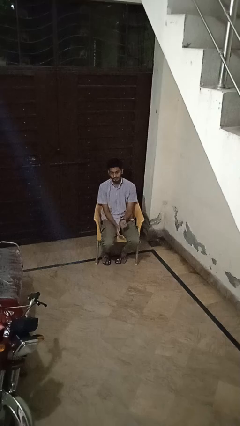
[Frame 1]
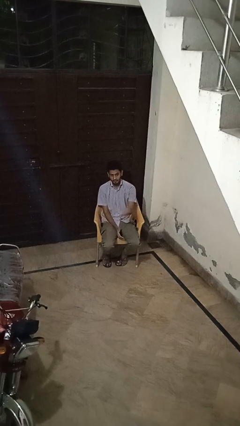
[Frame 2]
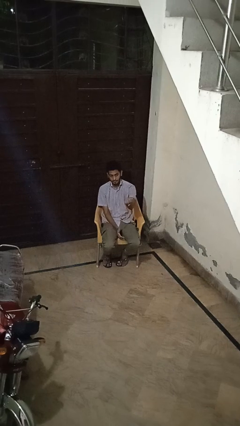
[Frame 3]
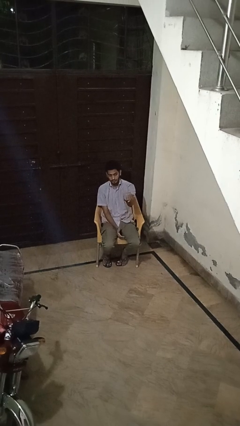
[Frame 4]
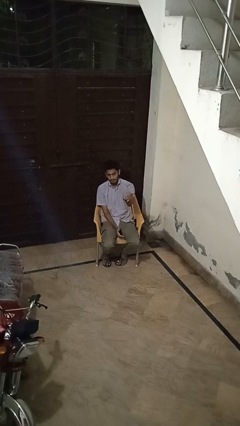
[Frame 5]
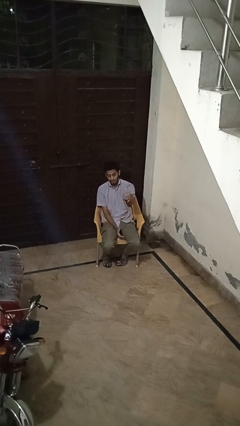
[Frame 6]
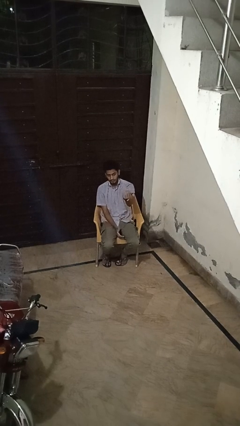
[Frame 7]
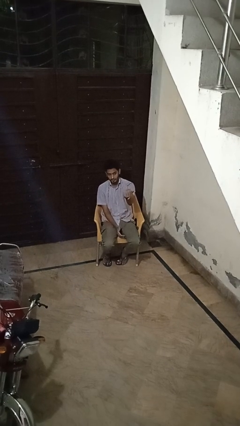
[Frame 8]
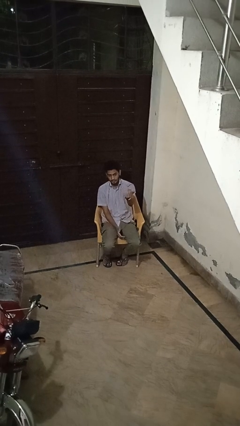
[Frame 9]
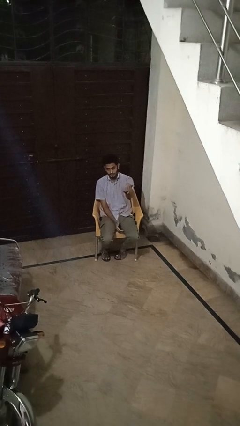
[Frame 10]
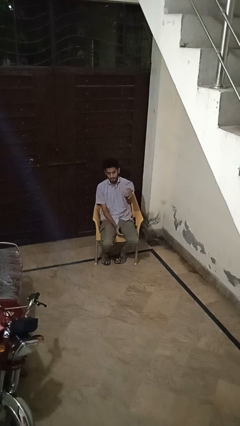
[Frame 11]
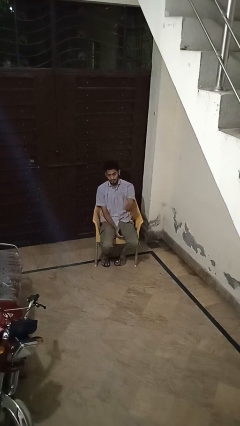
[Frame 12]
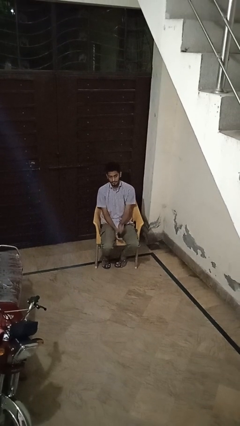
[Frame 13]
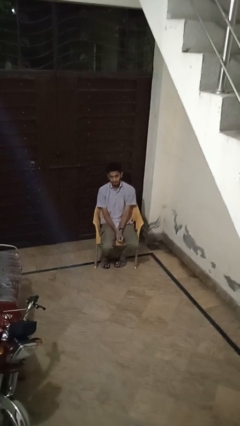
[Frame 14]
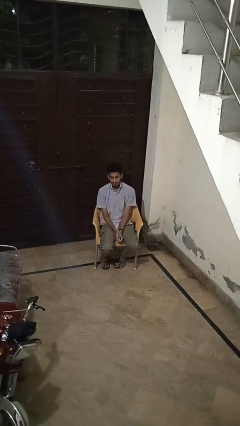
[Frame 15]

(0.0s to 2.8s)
person gestures come here

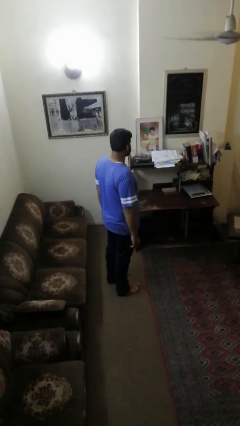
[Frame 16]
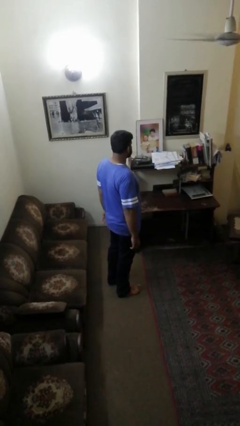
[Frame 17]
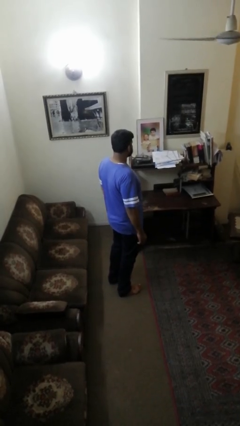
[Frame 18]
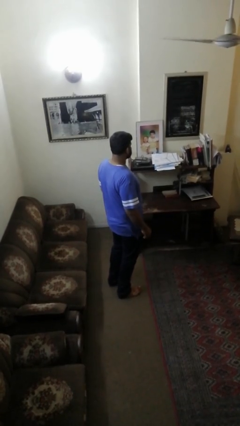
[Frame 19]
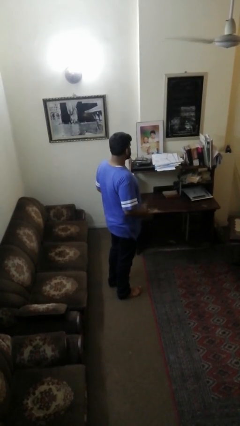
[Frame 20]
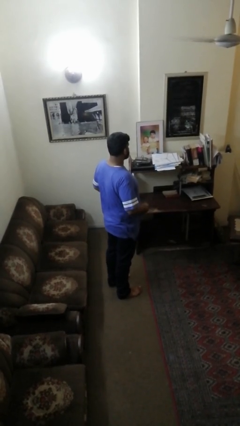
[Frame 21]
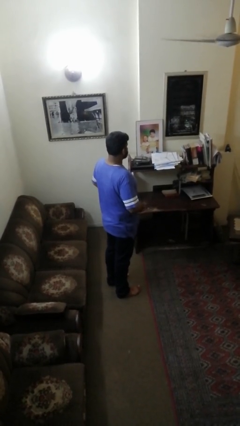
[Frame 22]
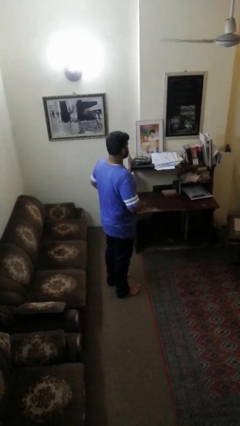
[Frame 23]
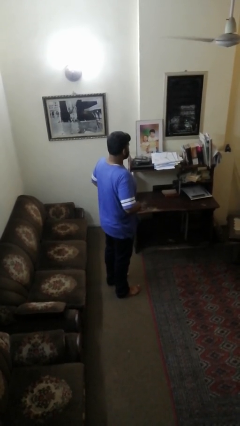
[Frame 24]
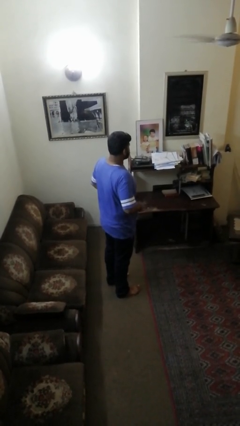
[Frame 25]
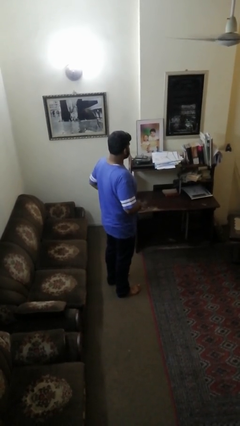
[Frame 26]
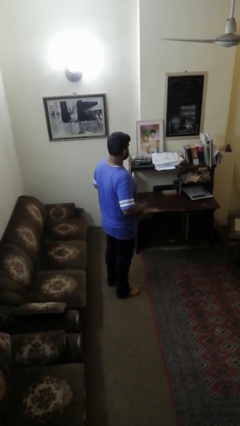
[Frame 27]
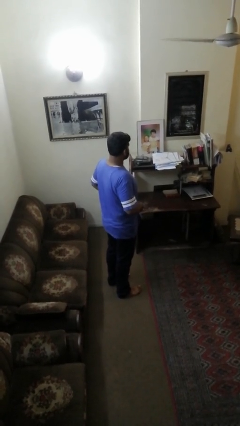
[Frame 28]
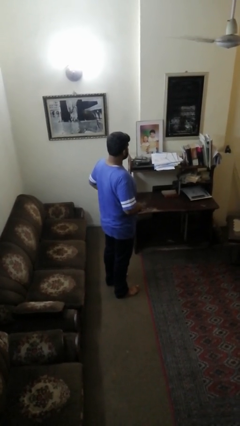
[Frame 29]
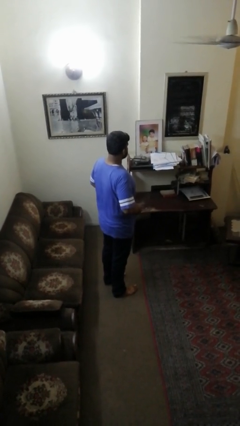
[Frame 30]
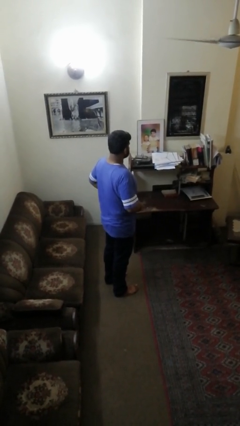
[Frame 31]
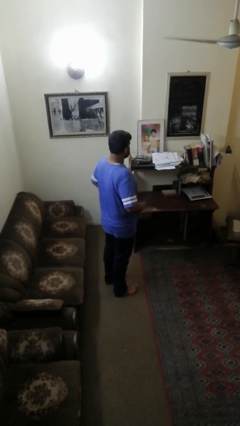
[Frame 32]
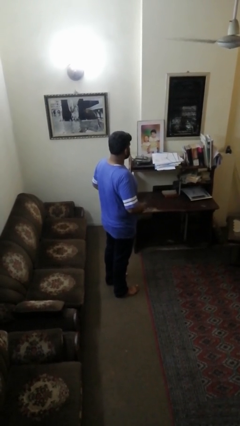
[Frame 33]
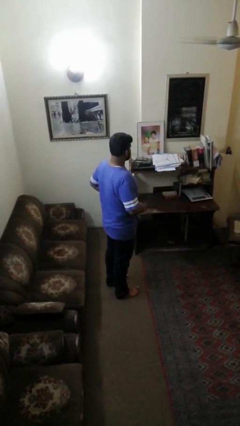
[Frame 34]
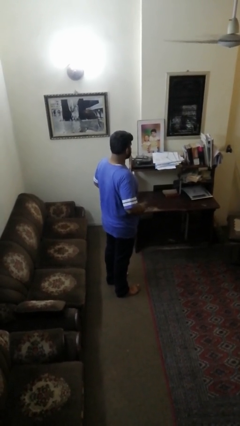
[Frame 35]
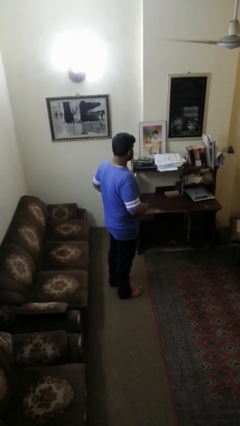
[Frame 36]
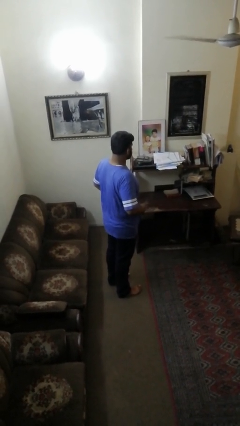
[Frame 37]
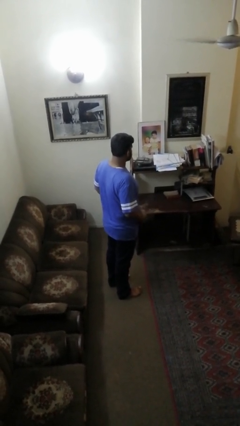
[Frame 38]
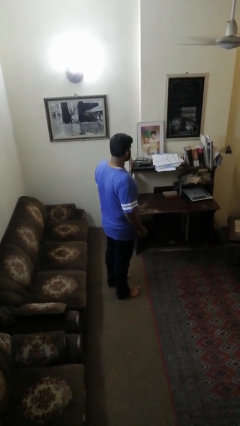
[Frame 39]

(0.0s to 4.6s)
person hikes up pants

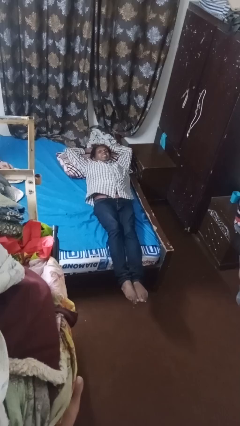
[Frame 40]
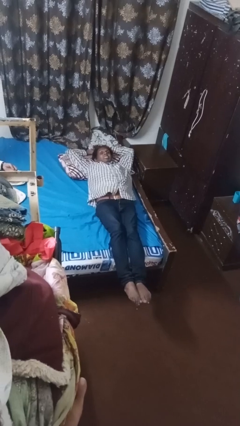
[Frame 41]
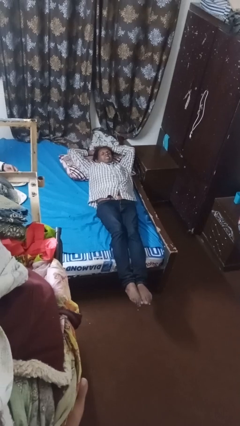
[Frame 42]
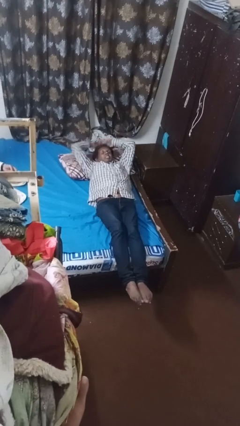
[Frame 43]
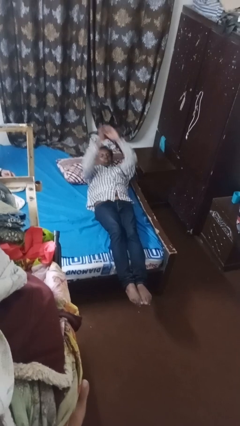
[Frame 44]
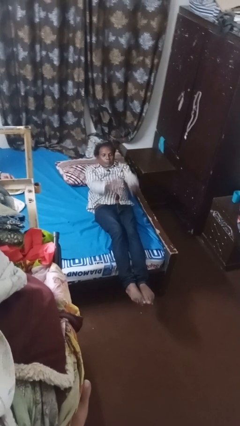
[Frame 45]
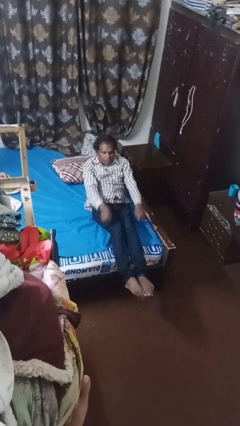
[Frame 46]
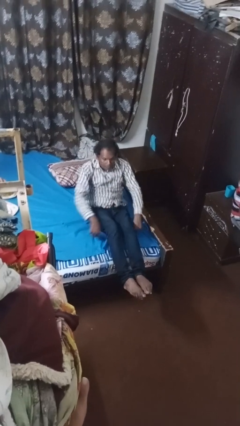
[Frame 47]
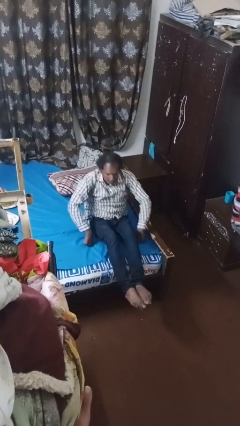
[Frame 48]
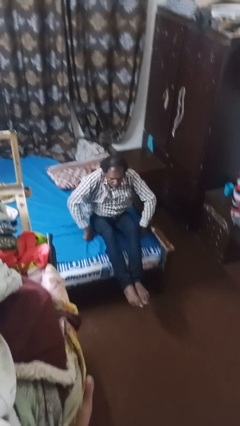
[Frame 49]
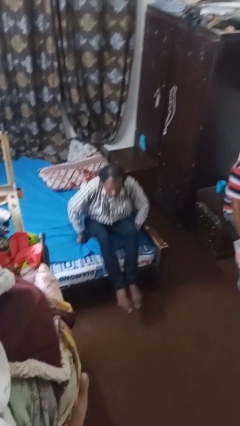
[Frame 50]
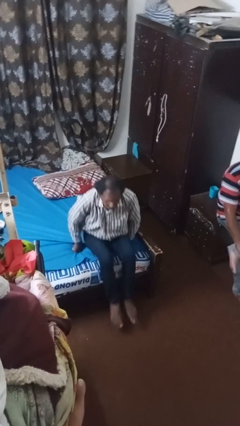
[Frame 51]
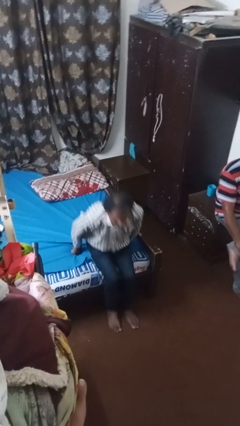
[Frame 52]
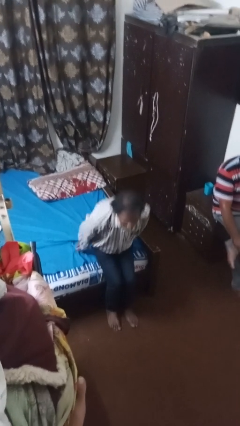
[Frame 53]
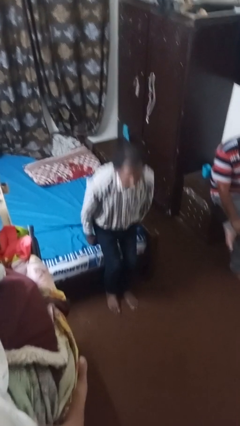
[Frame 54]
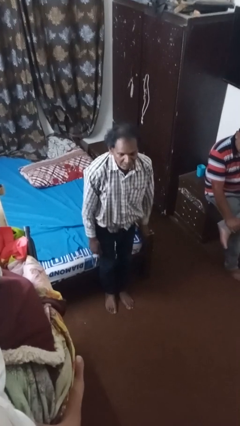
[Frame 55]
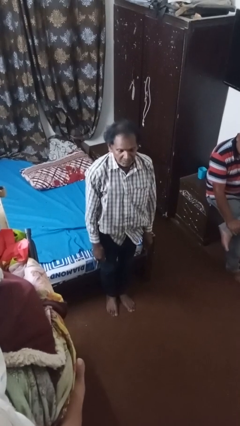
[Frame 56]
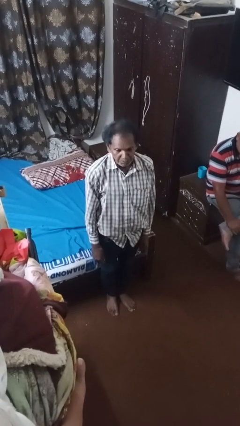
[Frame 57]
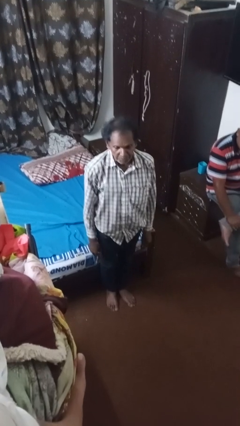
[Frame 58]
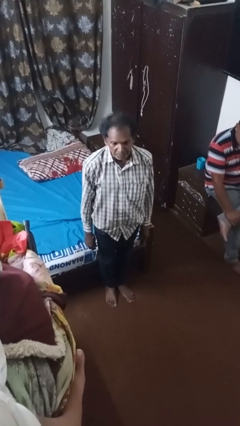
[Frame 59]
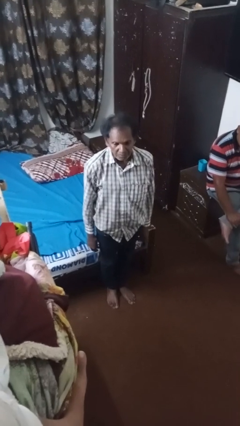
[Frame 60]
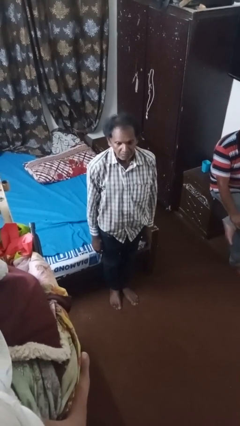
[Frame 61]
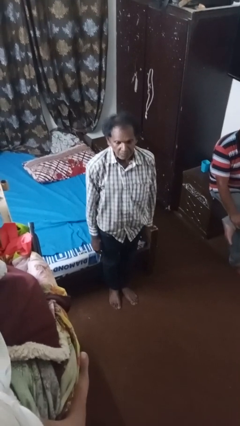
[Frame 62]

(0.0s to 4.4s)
person stands up

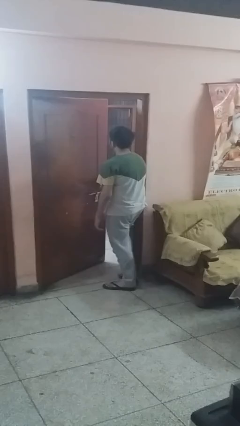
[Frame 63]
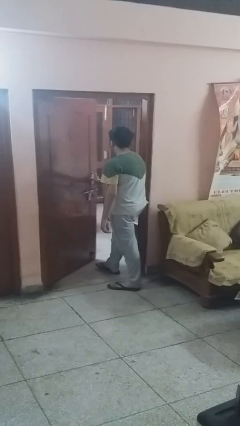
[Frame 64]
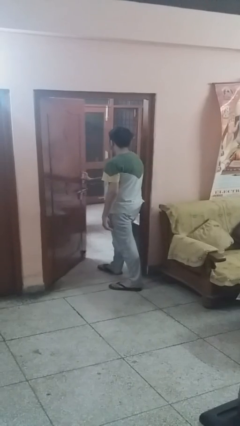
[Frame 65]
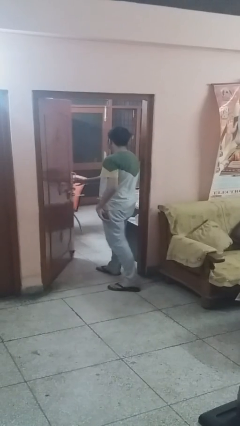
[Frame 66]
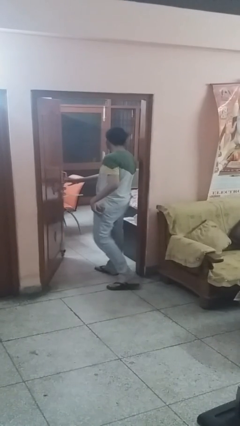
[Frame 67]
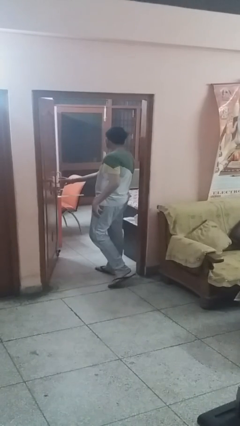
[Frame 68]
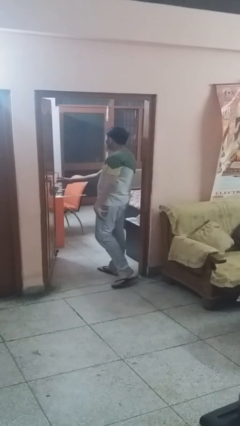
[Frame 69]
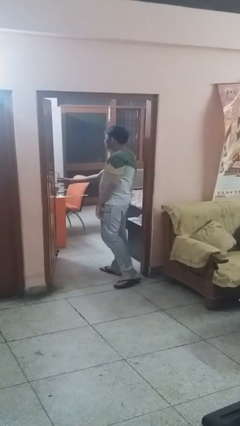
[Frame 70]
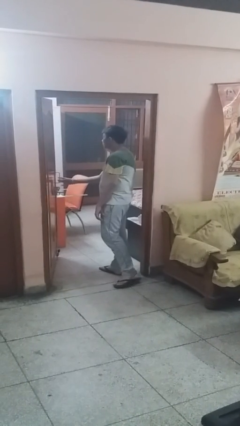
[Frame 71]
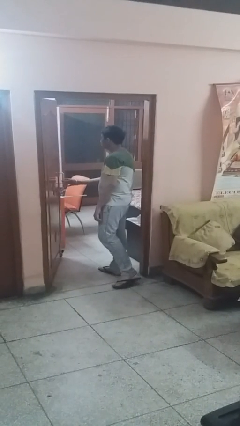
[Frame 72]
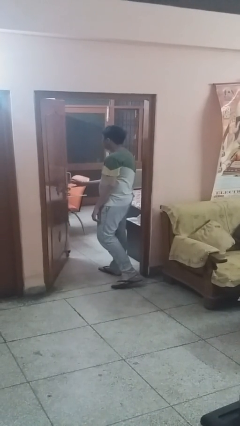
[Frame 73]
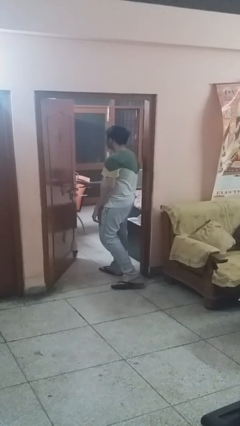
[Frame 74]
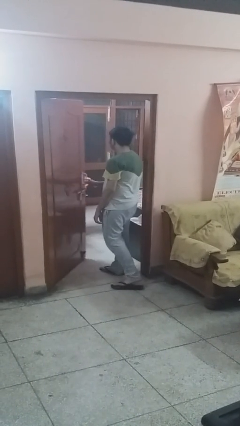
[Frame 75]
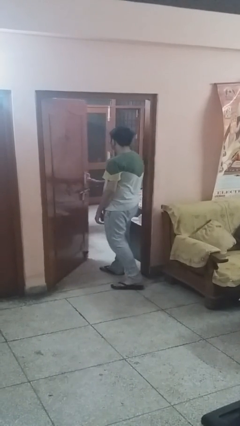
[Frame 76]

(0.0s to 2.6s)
person opens facility door

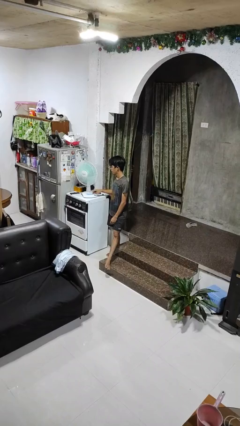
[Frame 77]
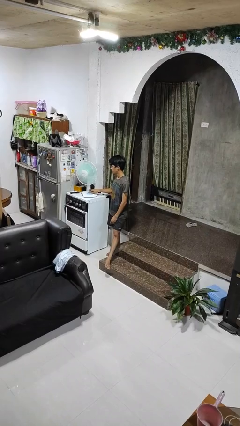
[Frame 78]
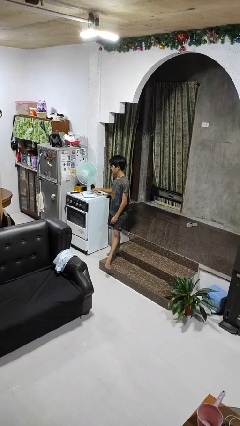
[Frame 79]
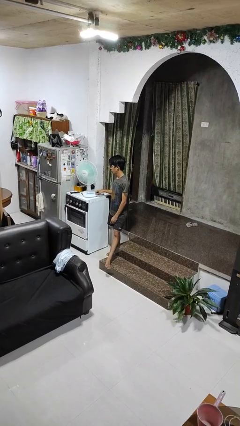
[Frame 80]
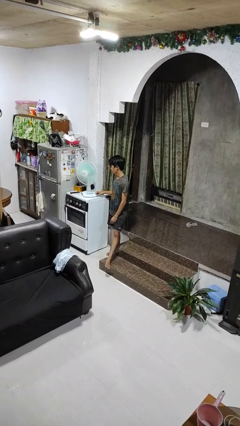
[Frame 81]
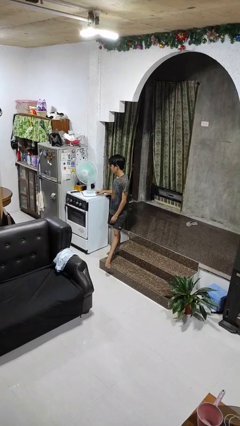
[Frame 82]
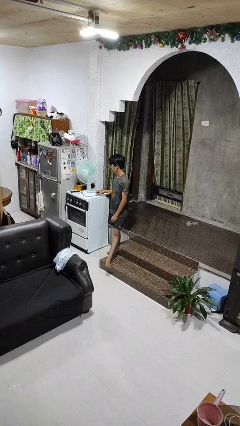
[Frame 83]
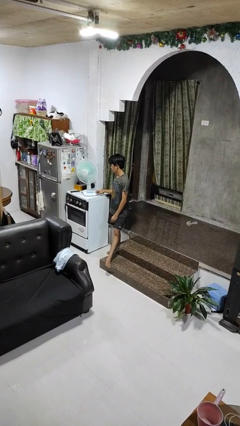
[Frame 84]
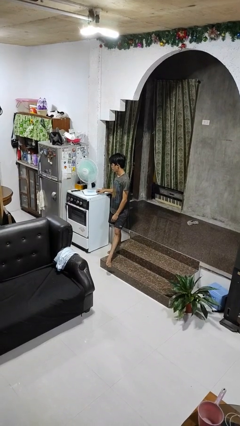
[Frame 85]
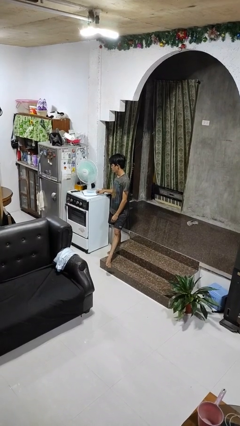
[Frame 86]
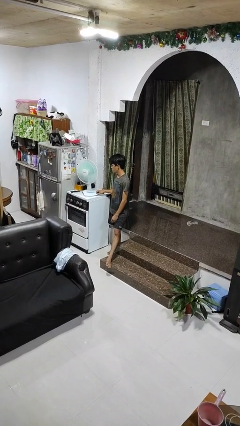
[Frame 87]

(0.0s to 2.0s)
person turns off fan

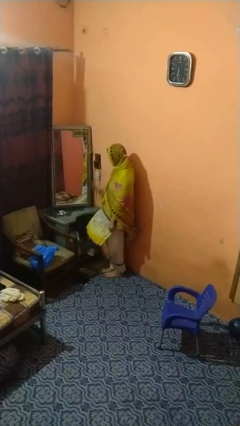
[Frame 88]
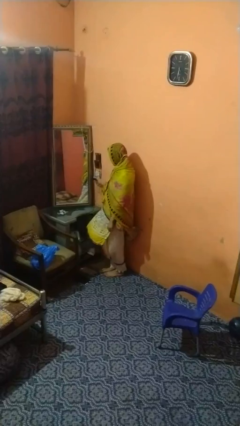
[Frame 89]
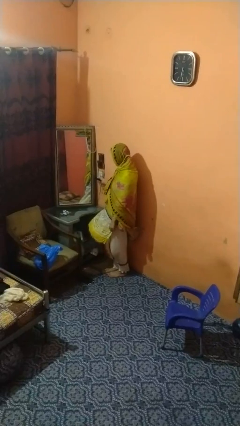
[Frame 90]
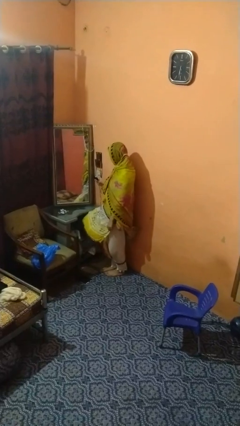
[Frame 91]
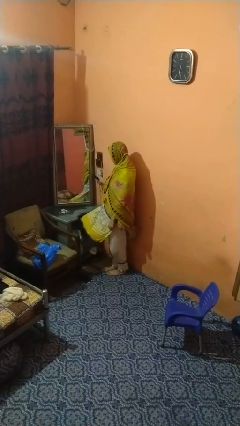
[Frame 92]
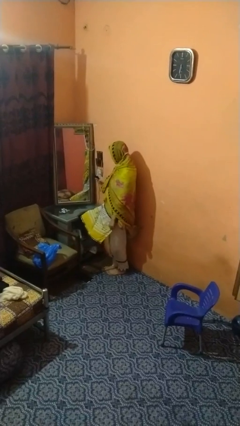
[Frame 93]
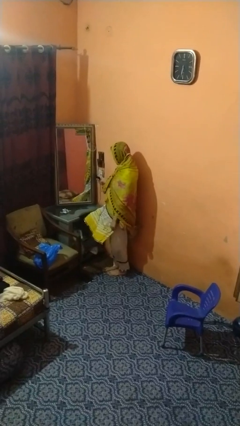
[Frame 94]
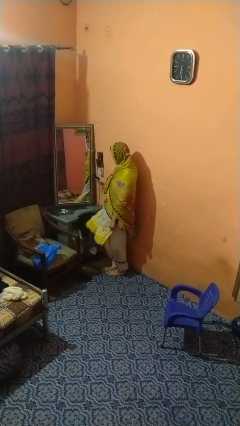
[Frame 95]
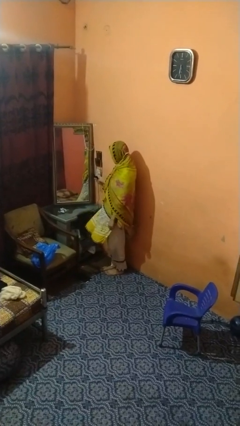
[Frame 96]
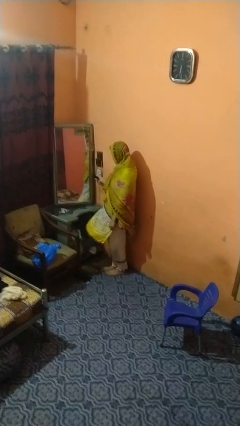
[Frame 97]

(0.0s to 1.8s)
person plugs into electrical socket
